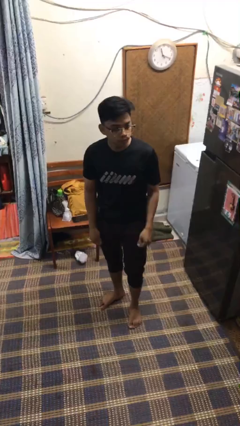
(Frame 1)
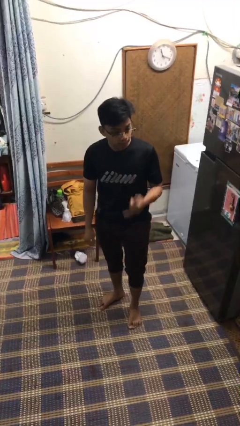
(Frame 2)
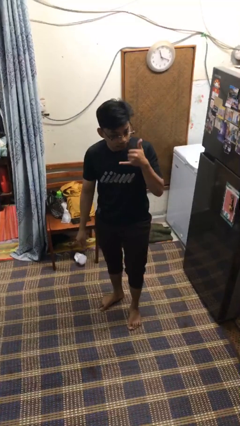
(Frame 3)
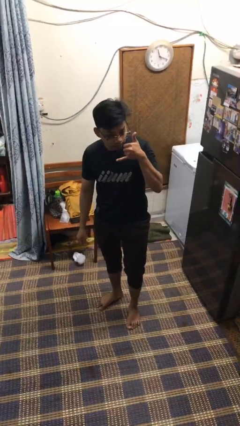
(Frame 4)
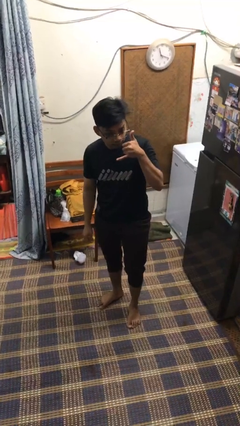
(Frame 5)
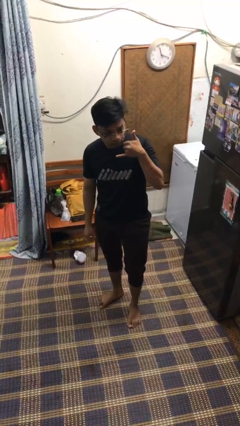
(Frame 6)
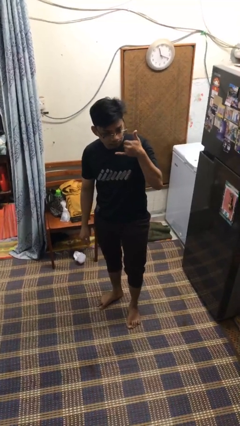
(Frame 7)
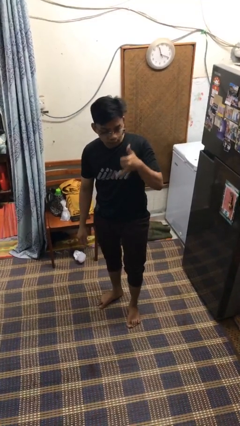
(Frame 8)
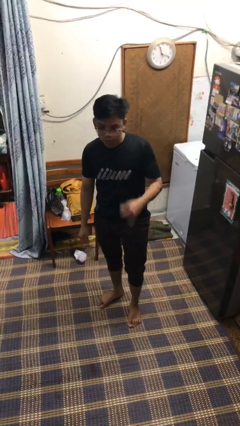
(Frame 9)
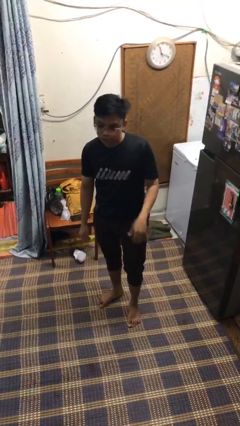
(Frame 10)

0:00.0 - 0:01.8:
person gestures hang loose

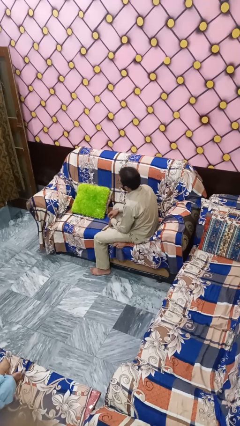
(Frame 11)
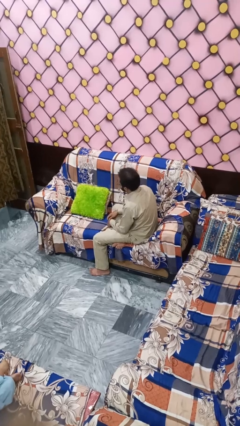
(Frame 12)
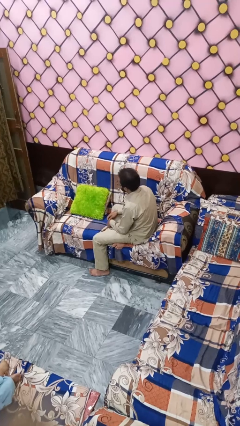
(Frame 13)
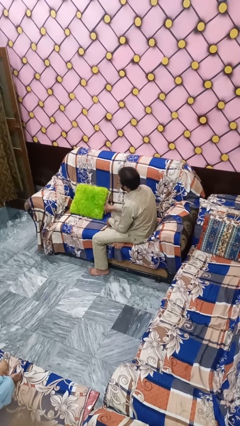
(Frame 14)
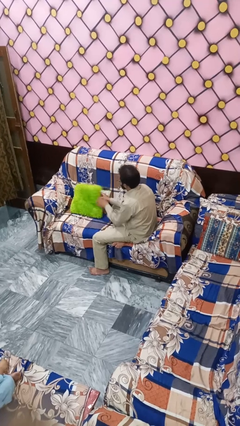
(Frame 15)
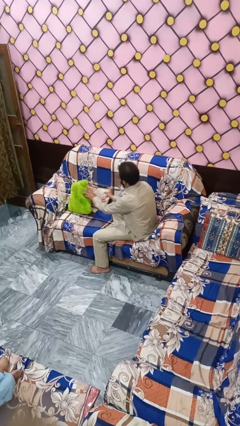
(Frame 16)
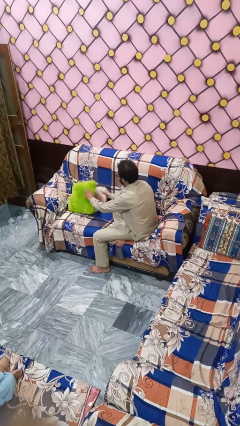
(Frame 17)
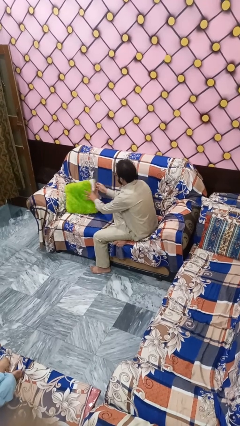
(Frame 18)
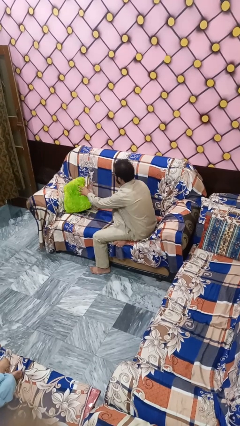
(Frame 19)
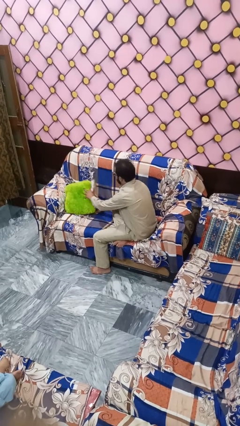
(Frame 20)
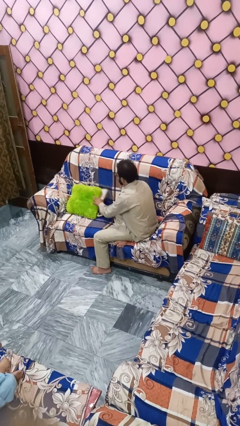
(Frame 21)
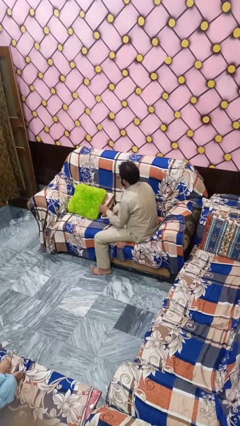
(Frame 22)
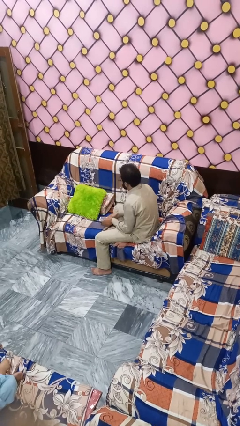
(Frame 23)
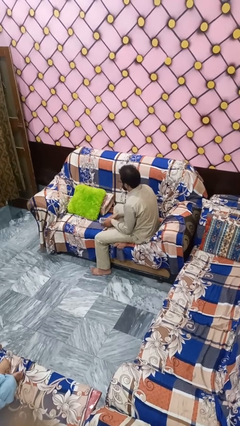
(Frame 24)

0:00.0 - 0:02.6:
person searches in couch

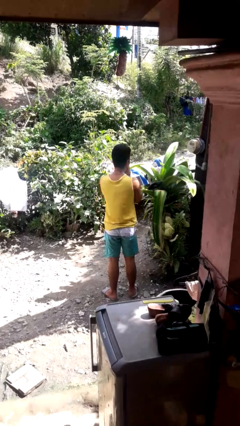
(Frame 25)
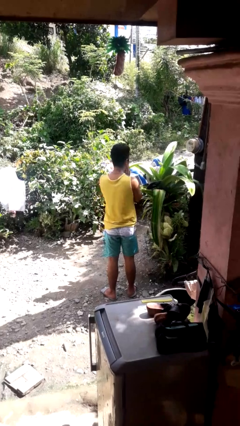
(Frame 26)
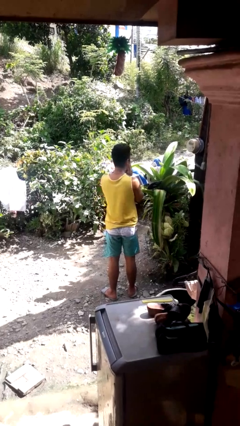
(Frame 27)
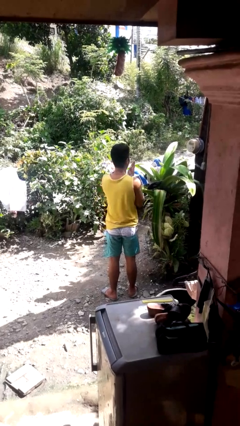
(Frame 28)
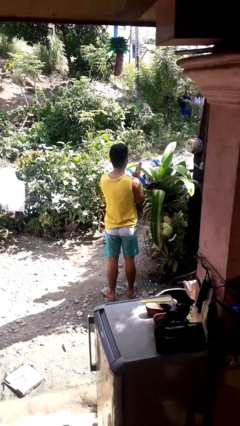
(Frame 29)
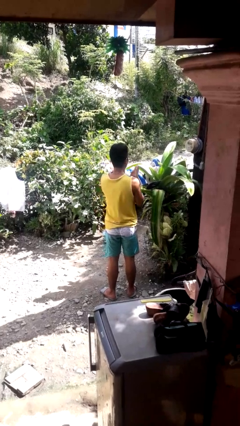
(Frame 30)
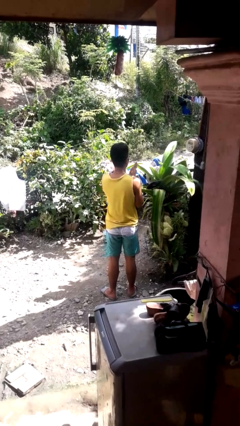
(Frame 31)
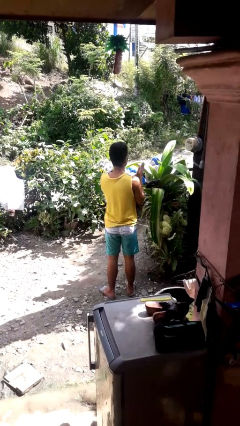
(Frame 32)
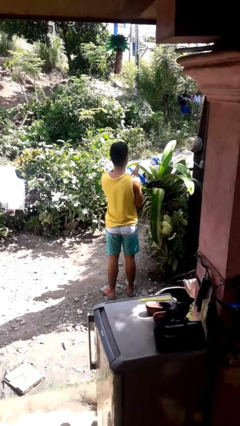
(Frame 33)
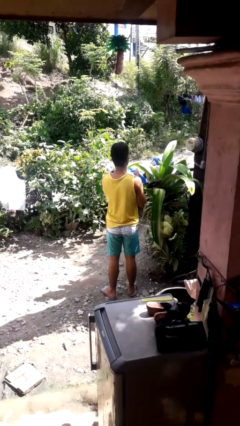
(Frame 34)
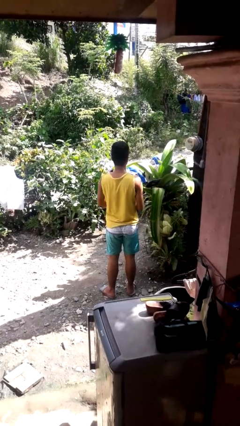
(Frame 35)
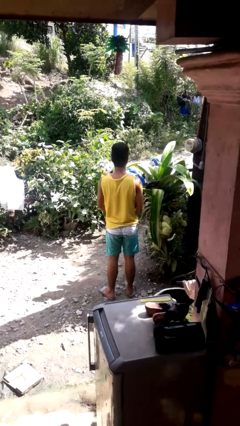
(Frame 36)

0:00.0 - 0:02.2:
person blows into hands

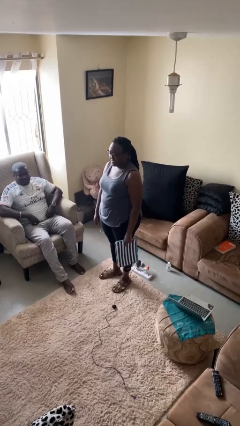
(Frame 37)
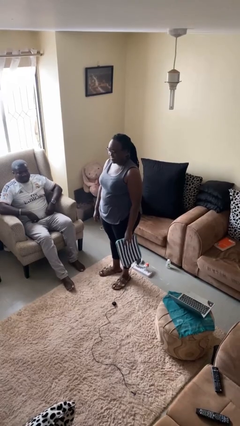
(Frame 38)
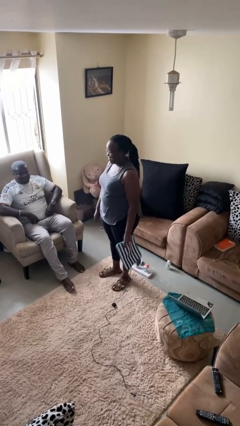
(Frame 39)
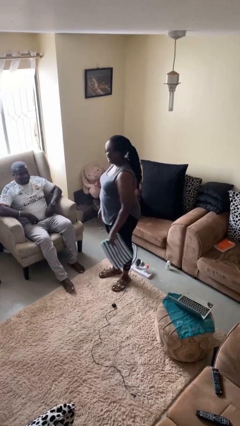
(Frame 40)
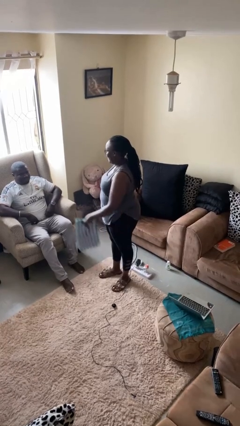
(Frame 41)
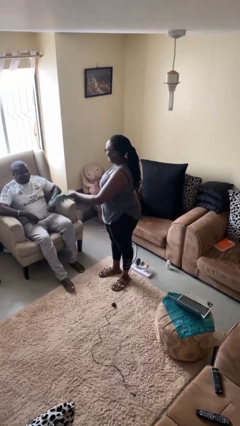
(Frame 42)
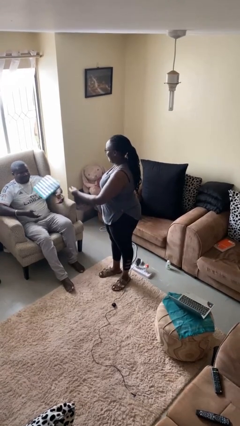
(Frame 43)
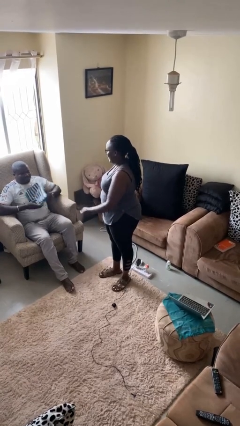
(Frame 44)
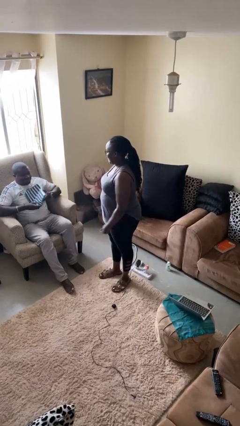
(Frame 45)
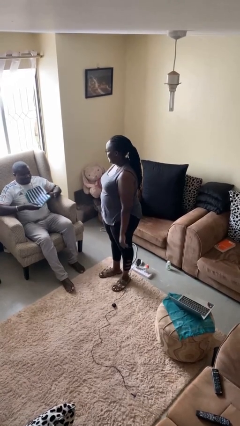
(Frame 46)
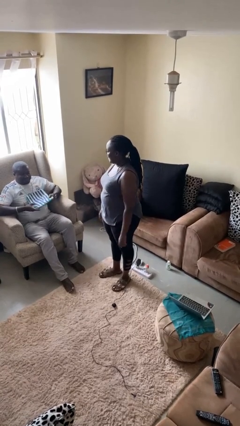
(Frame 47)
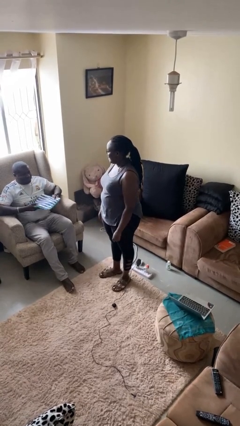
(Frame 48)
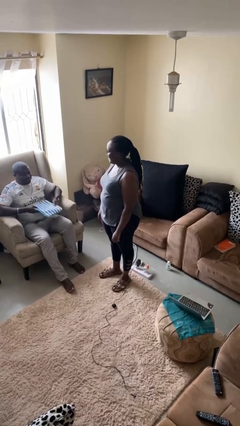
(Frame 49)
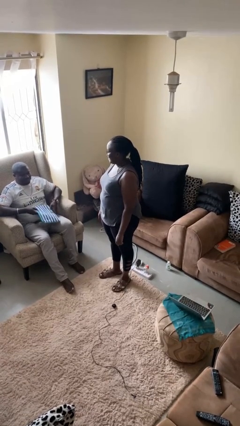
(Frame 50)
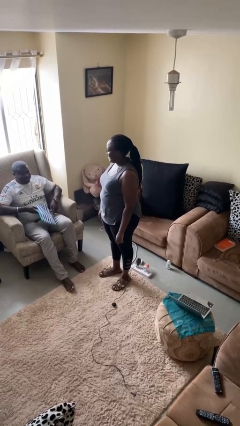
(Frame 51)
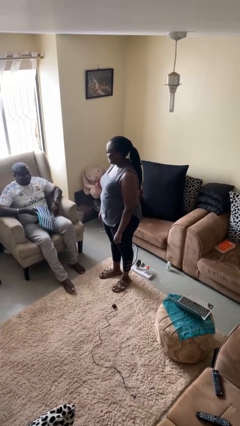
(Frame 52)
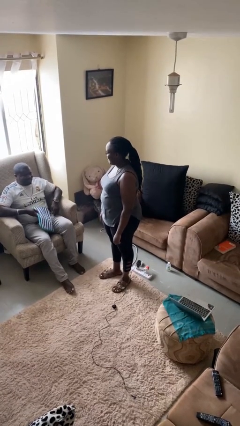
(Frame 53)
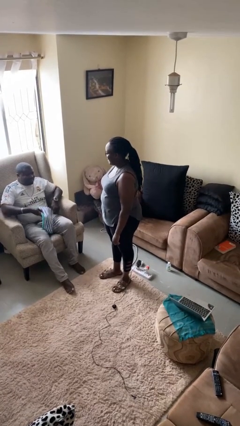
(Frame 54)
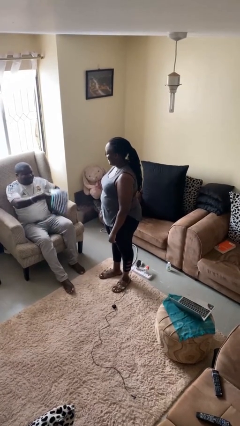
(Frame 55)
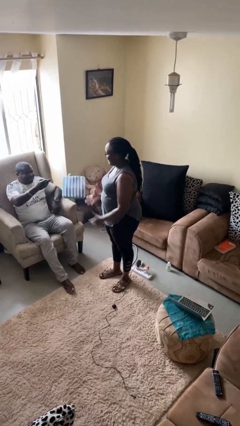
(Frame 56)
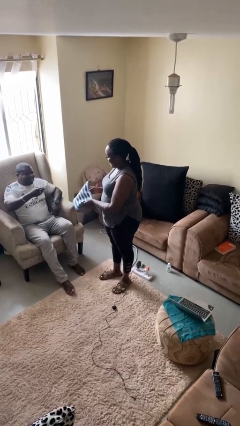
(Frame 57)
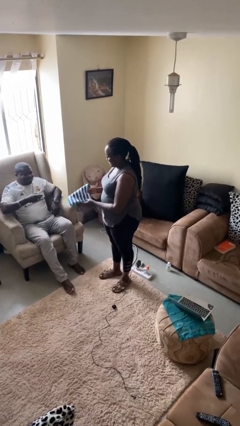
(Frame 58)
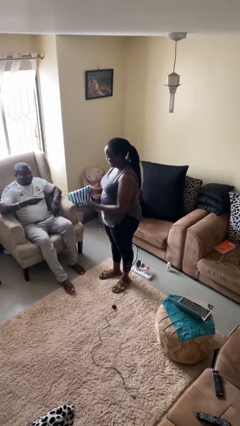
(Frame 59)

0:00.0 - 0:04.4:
person throws object to person

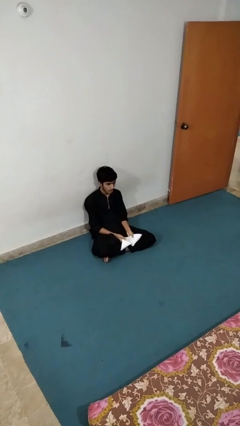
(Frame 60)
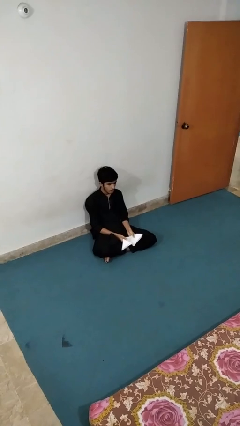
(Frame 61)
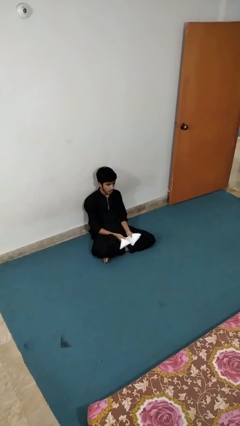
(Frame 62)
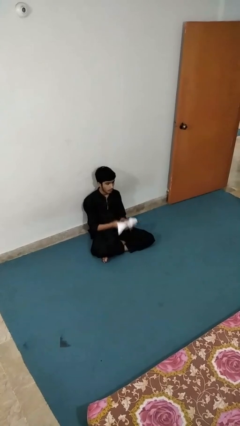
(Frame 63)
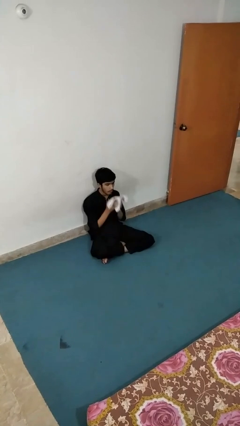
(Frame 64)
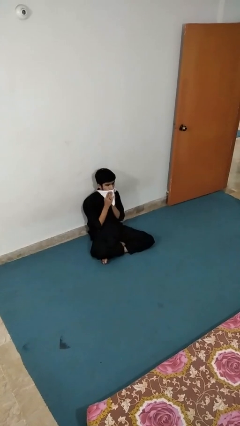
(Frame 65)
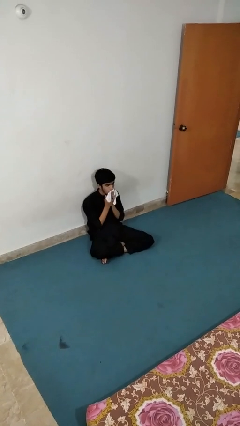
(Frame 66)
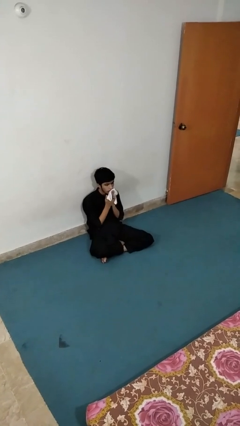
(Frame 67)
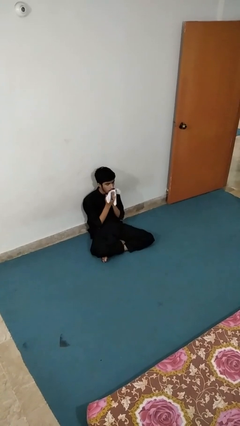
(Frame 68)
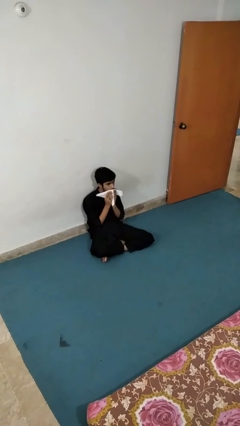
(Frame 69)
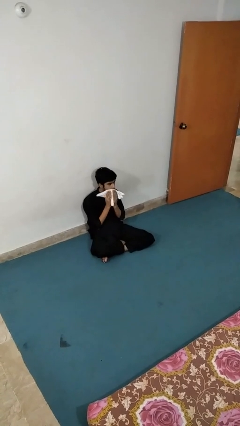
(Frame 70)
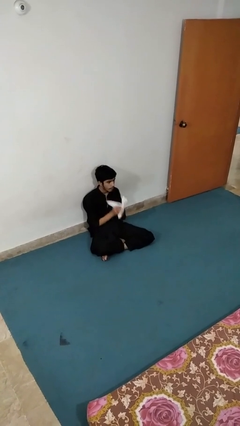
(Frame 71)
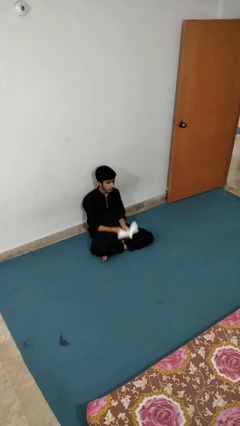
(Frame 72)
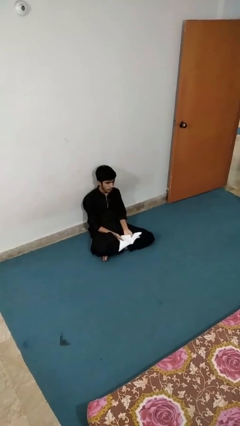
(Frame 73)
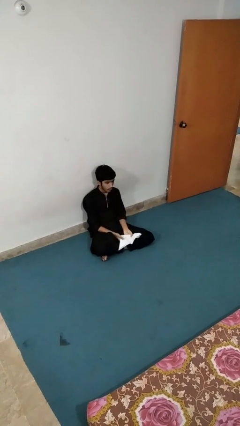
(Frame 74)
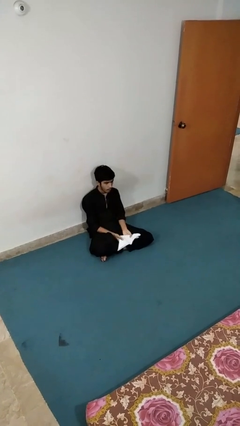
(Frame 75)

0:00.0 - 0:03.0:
person wipes mouth with napkin

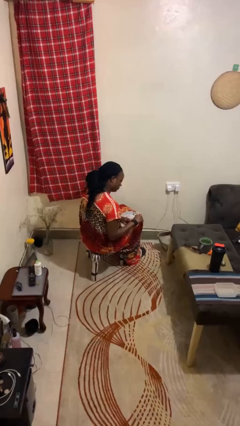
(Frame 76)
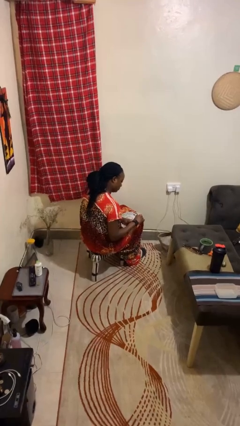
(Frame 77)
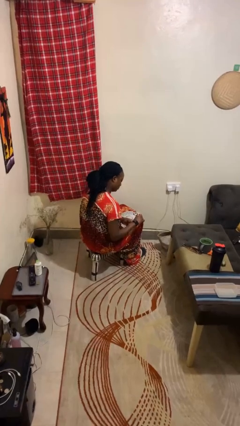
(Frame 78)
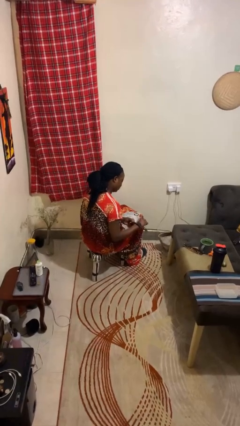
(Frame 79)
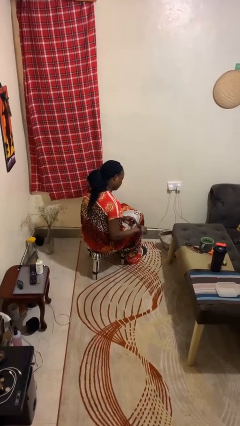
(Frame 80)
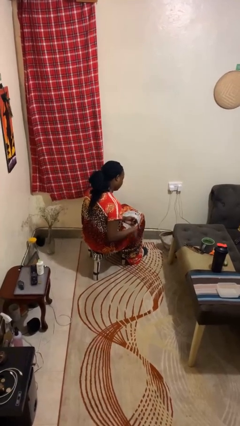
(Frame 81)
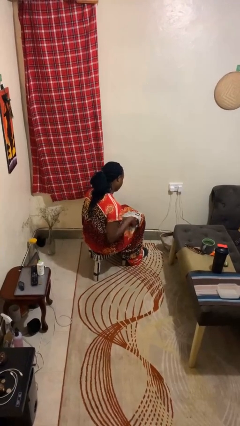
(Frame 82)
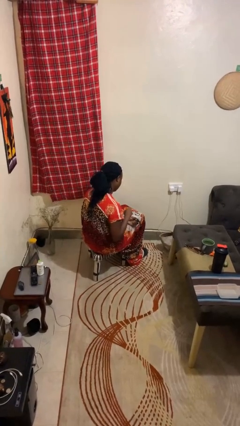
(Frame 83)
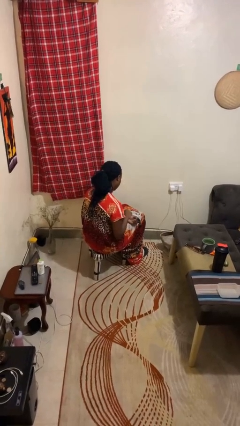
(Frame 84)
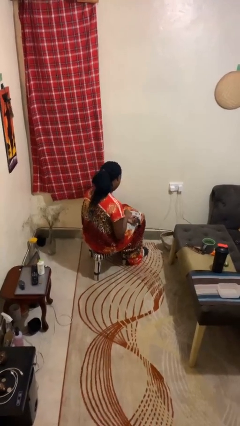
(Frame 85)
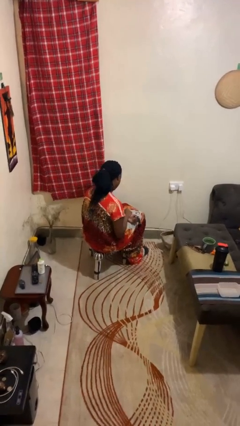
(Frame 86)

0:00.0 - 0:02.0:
person takes off wristwatch

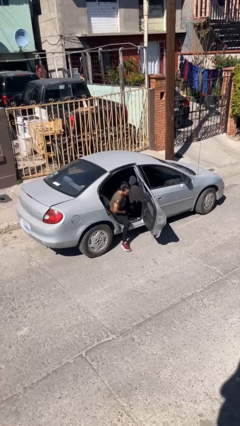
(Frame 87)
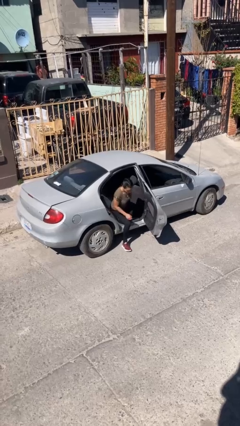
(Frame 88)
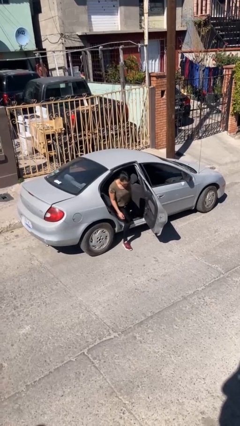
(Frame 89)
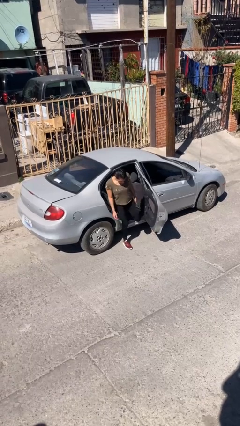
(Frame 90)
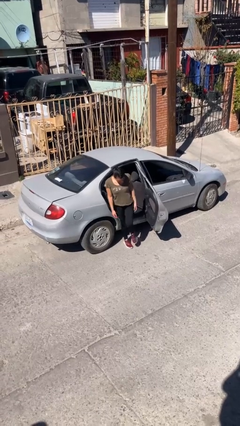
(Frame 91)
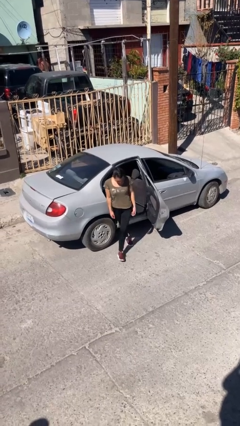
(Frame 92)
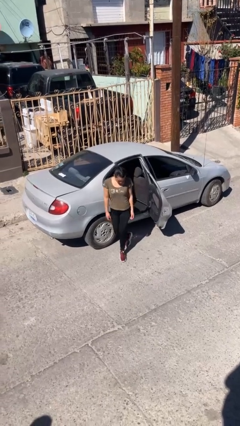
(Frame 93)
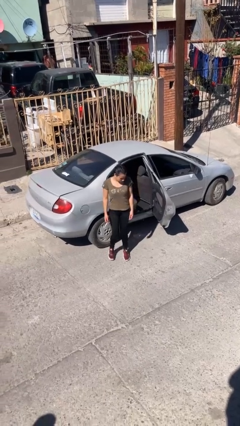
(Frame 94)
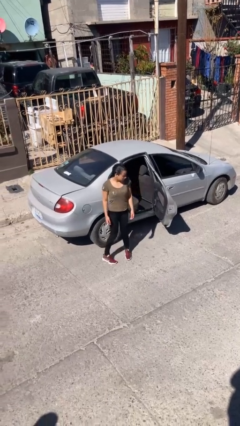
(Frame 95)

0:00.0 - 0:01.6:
person exits car
